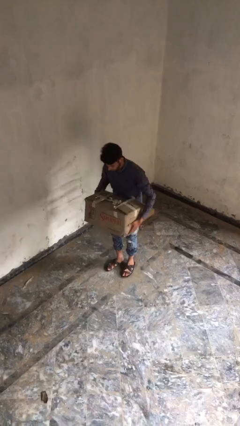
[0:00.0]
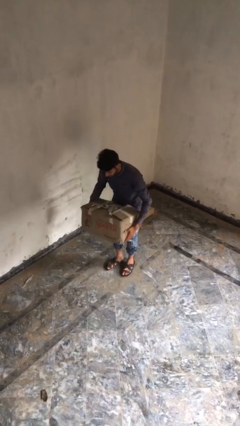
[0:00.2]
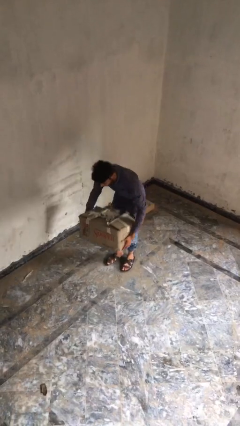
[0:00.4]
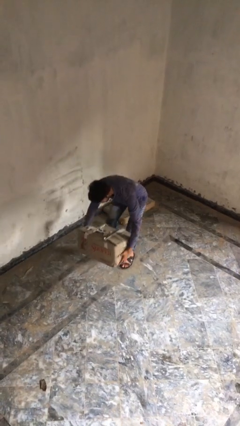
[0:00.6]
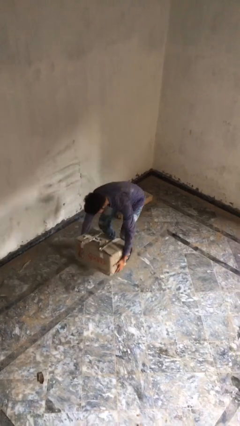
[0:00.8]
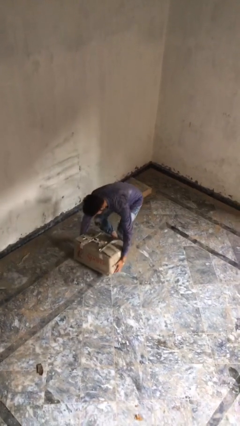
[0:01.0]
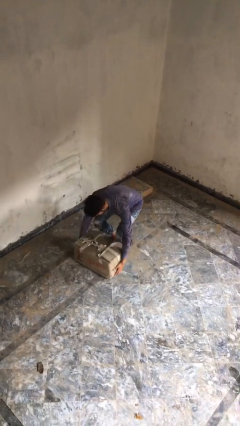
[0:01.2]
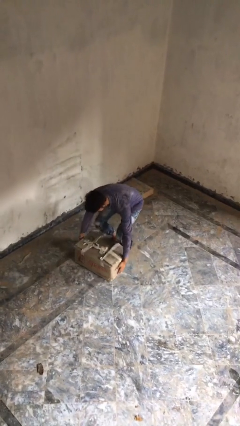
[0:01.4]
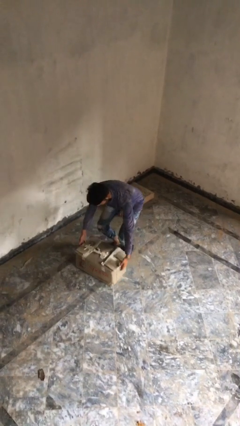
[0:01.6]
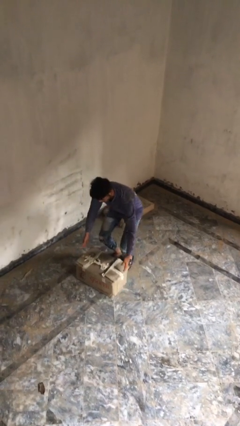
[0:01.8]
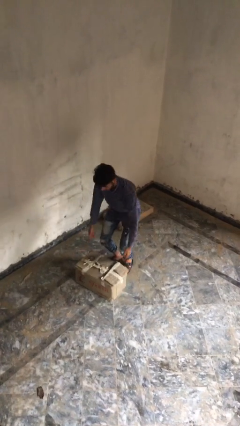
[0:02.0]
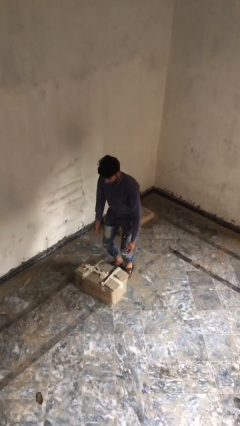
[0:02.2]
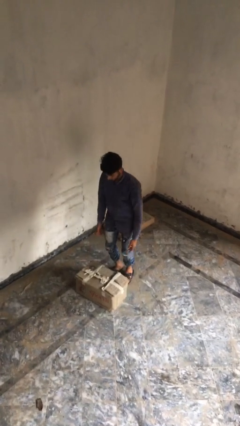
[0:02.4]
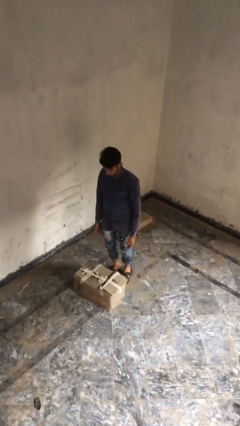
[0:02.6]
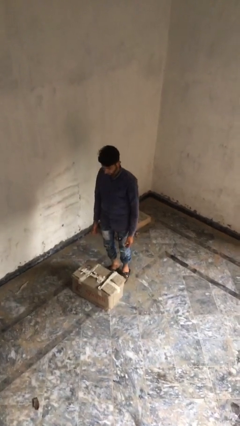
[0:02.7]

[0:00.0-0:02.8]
person puts down object on floor

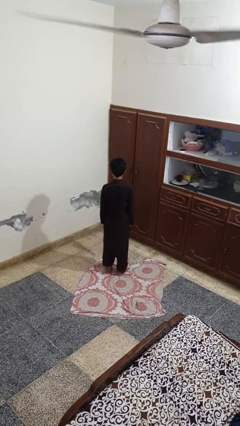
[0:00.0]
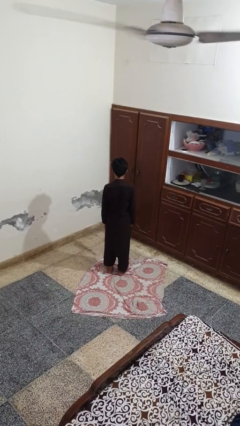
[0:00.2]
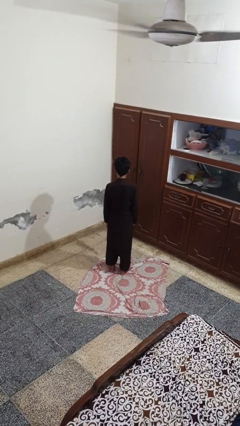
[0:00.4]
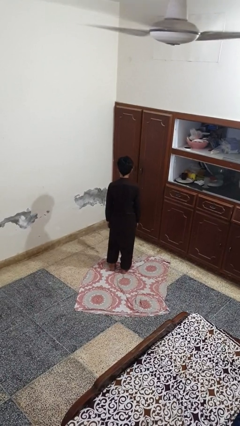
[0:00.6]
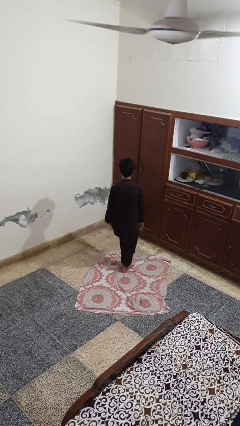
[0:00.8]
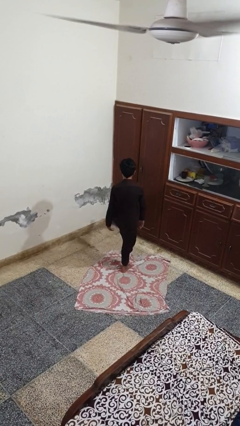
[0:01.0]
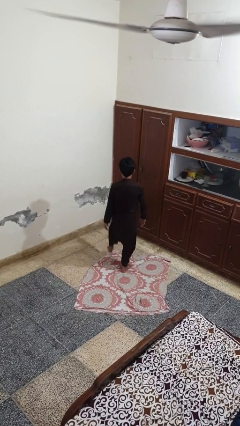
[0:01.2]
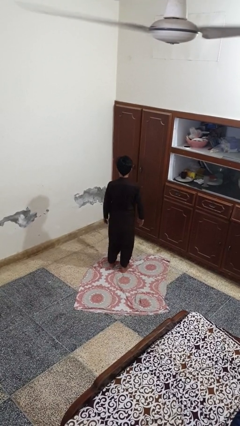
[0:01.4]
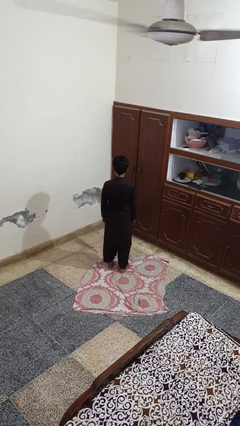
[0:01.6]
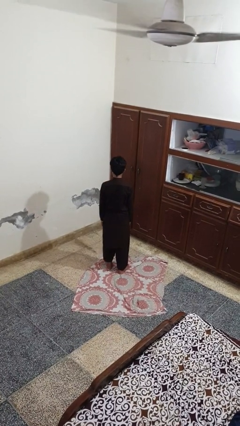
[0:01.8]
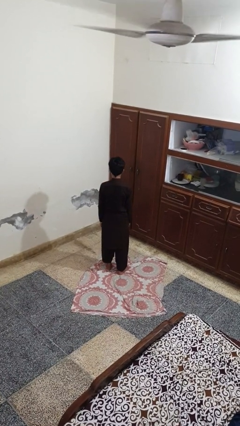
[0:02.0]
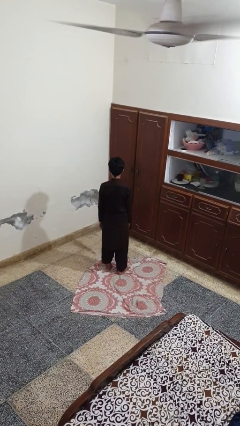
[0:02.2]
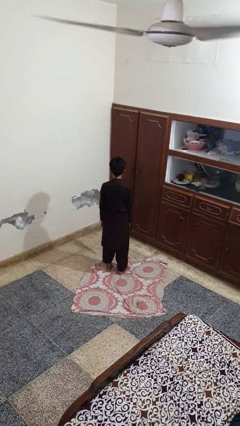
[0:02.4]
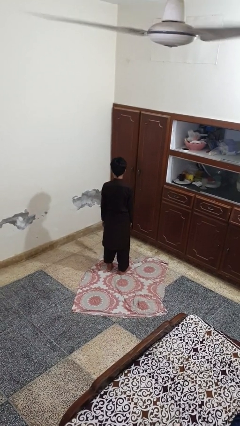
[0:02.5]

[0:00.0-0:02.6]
person karate kicks

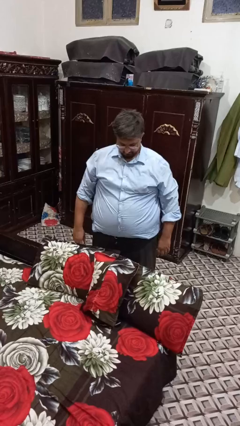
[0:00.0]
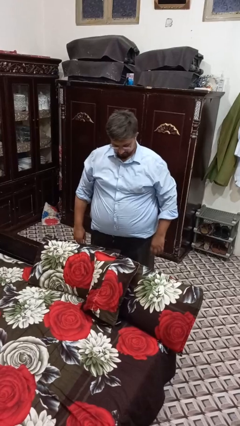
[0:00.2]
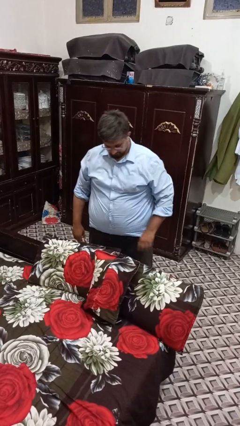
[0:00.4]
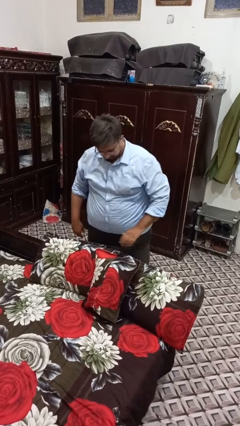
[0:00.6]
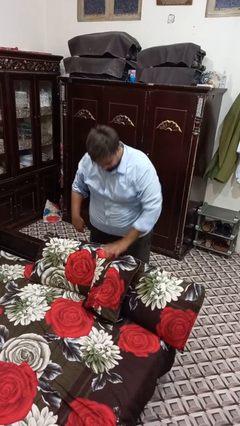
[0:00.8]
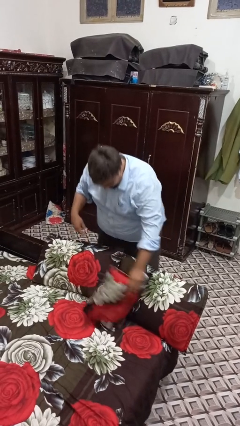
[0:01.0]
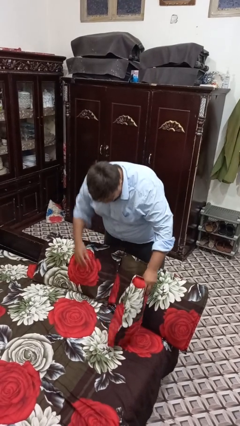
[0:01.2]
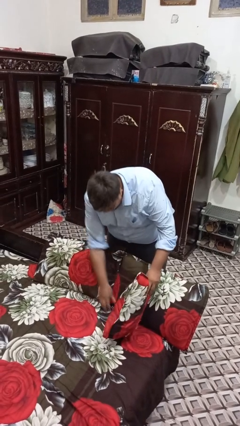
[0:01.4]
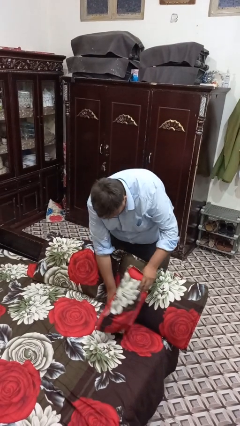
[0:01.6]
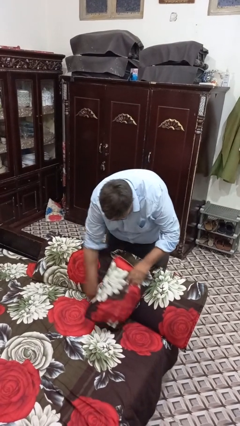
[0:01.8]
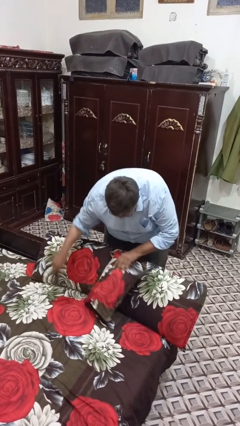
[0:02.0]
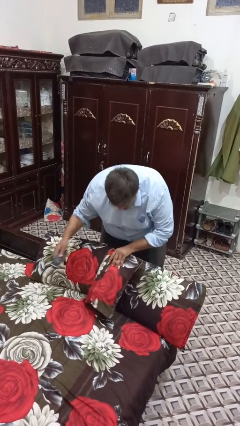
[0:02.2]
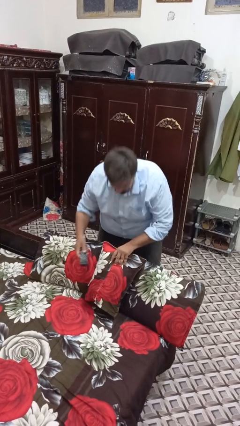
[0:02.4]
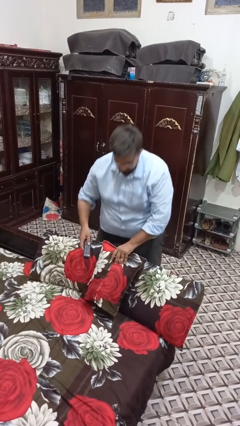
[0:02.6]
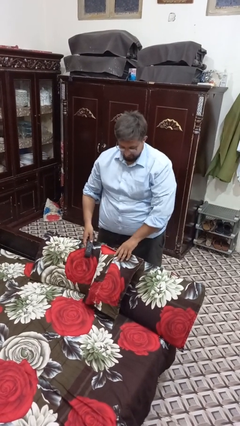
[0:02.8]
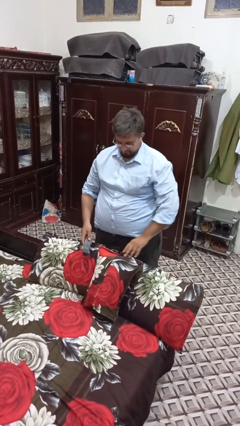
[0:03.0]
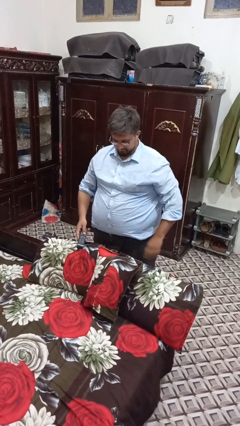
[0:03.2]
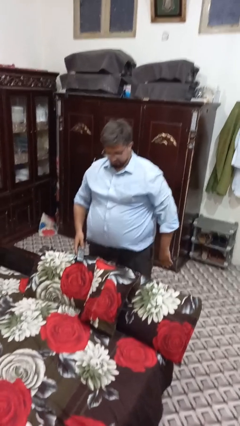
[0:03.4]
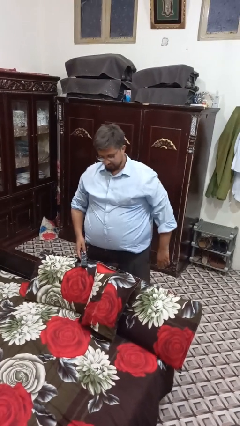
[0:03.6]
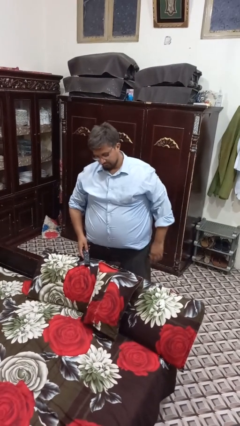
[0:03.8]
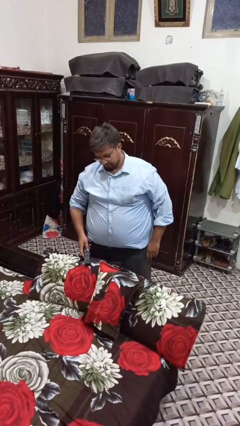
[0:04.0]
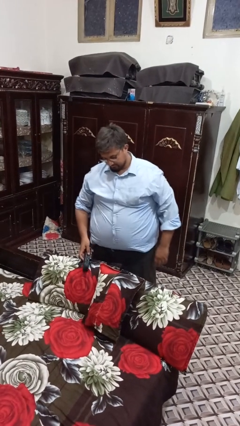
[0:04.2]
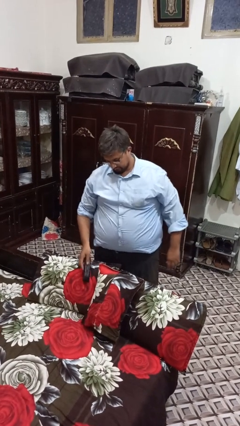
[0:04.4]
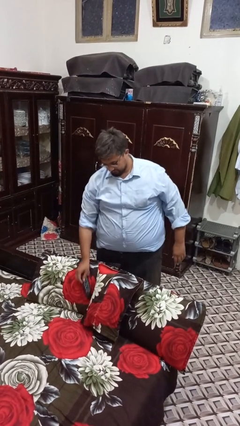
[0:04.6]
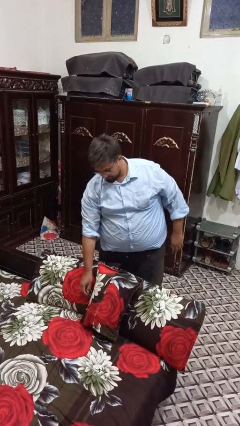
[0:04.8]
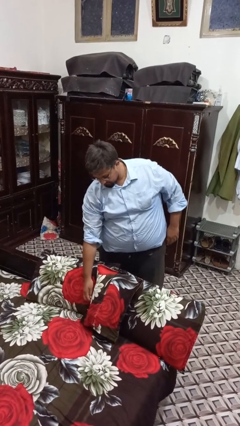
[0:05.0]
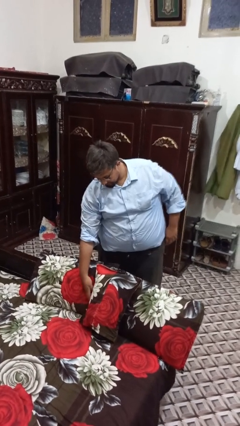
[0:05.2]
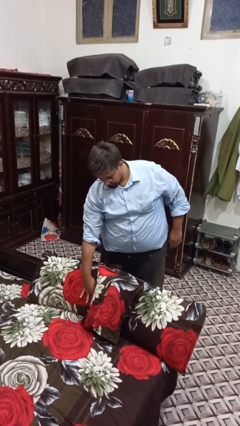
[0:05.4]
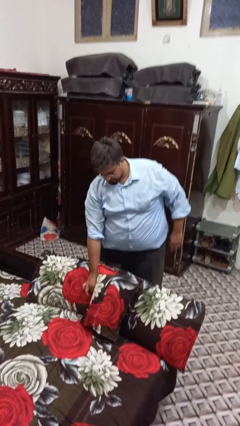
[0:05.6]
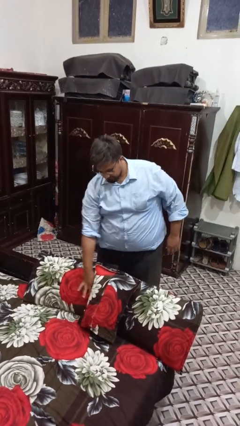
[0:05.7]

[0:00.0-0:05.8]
person searches in couch

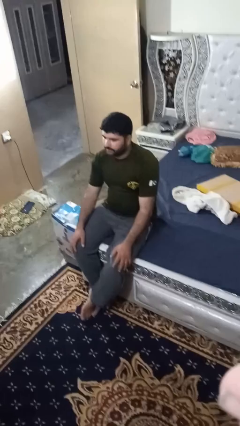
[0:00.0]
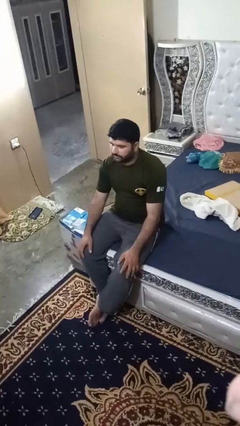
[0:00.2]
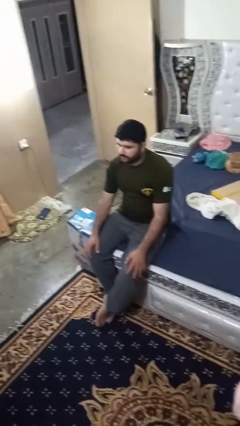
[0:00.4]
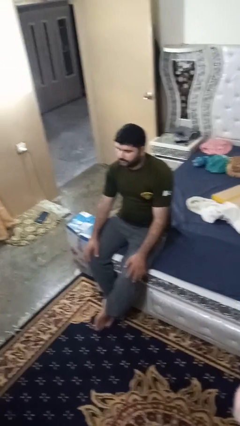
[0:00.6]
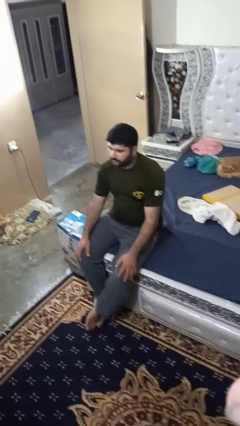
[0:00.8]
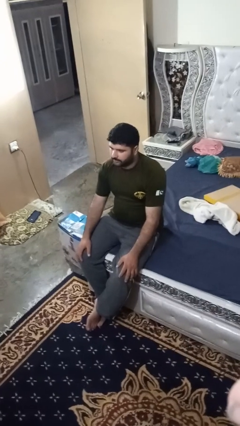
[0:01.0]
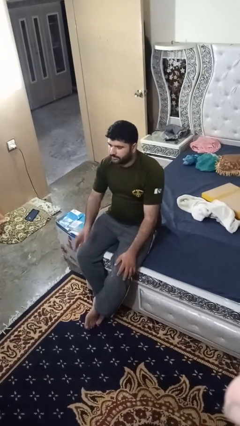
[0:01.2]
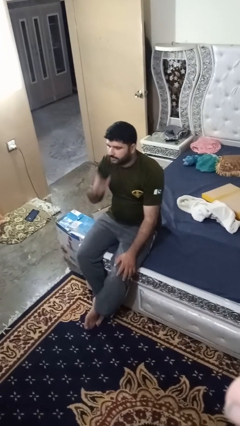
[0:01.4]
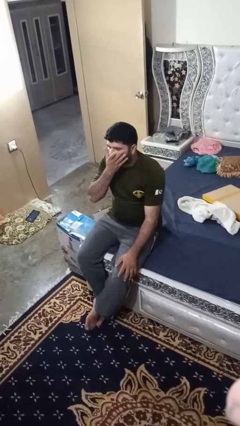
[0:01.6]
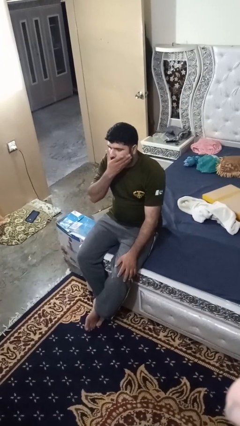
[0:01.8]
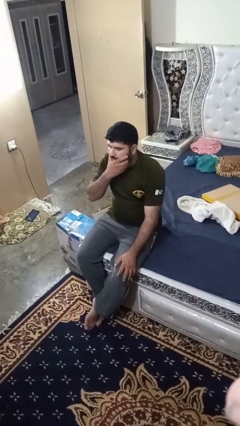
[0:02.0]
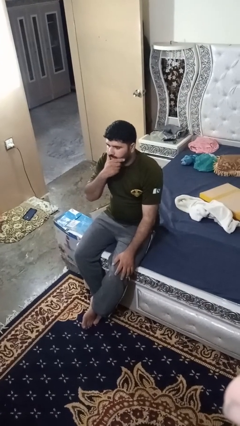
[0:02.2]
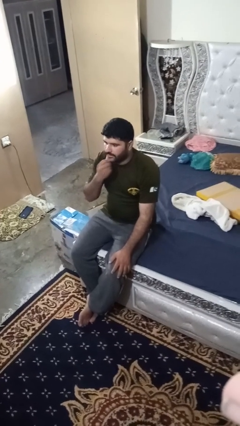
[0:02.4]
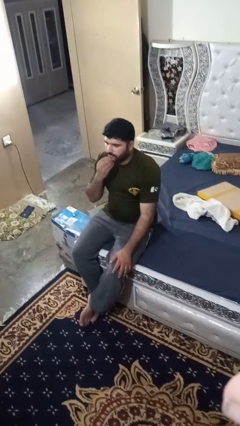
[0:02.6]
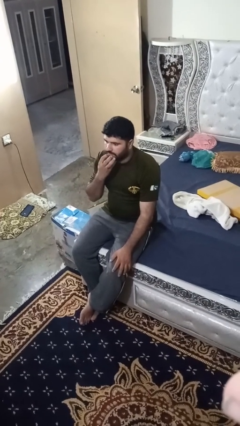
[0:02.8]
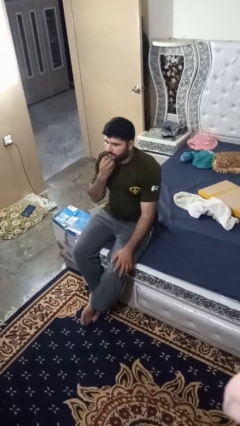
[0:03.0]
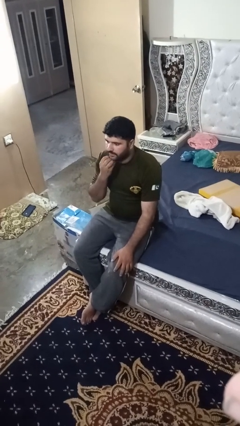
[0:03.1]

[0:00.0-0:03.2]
person strokes chin

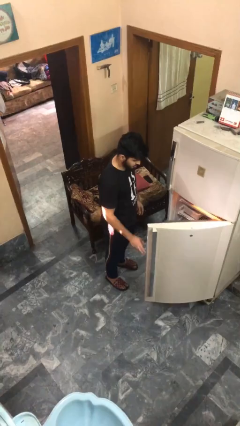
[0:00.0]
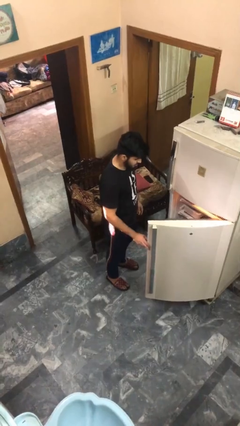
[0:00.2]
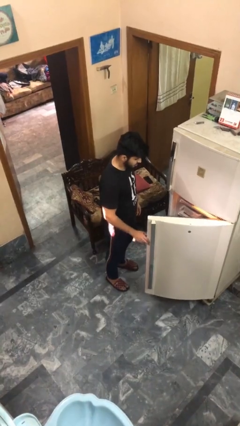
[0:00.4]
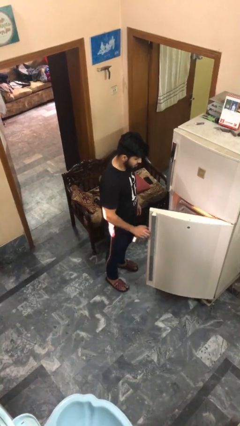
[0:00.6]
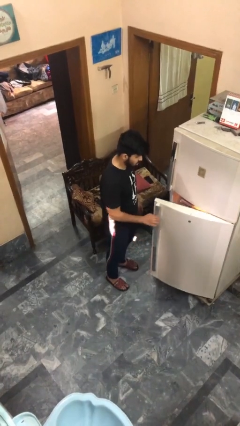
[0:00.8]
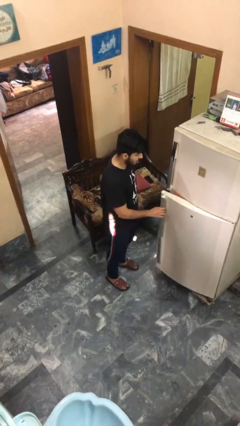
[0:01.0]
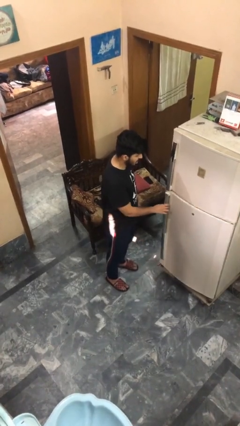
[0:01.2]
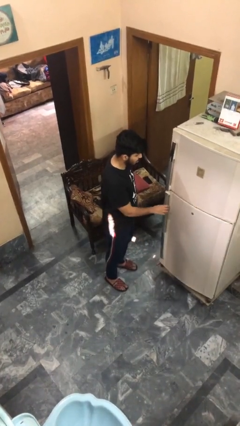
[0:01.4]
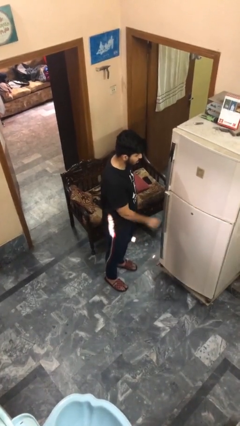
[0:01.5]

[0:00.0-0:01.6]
person closes refrigerator

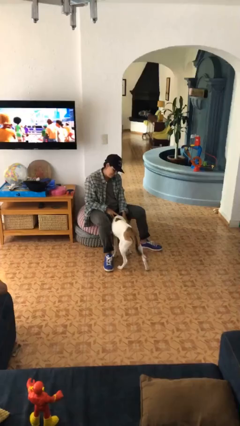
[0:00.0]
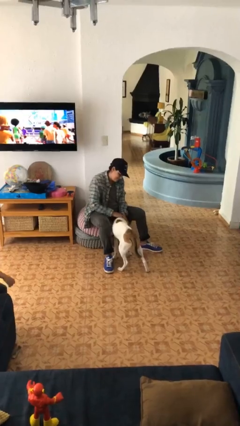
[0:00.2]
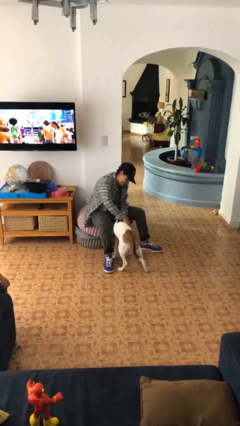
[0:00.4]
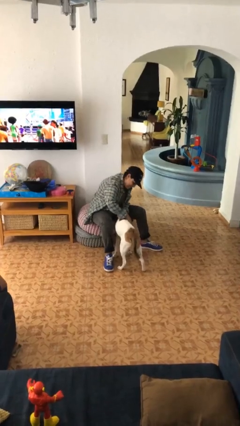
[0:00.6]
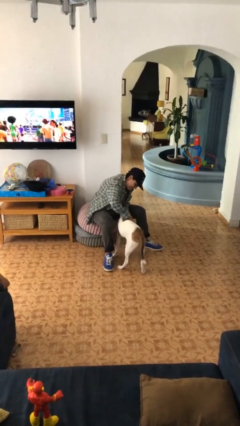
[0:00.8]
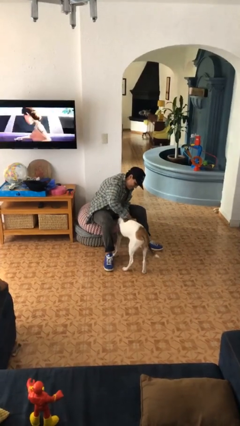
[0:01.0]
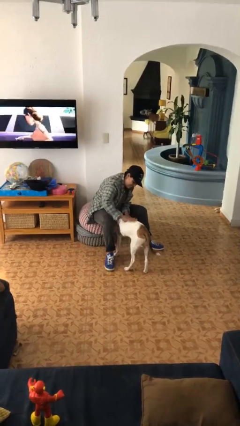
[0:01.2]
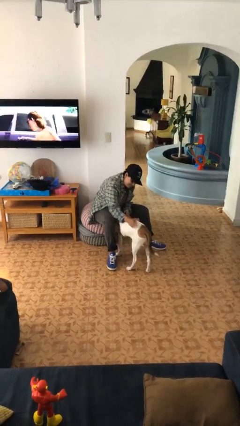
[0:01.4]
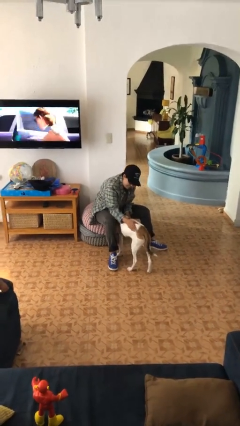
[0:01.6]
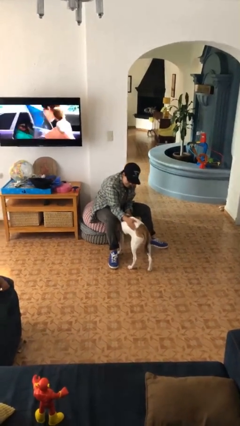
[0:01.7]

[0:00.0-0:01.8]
person pets dog
